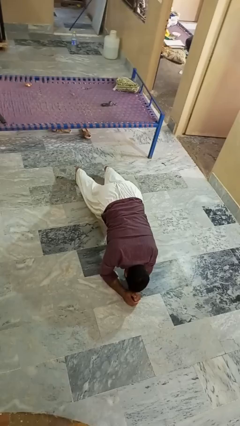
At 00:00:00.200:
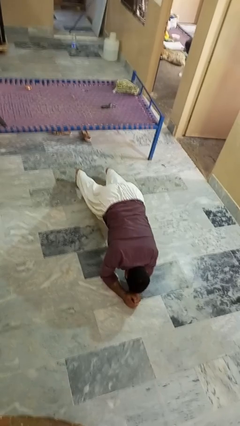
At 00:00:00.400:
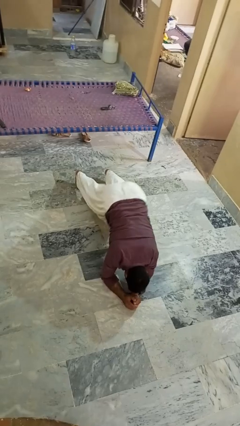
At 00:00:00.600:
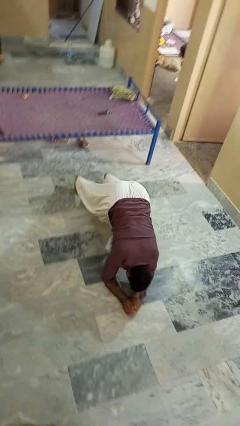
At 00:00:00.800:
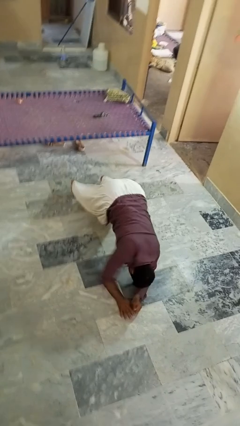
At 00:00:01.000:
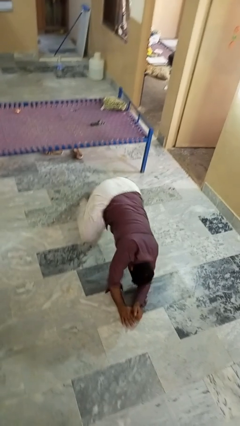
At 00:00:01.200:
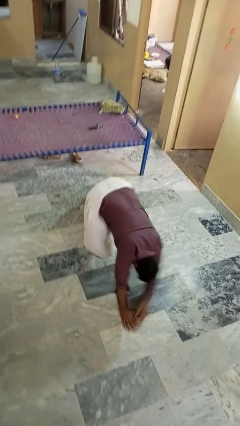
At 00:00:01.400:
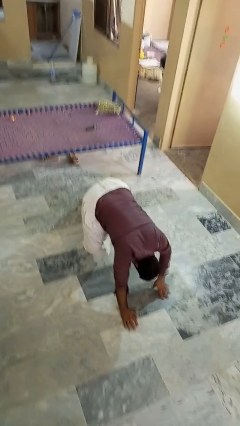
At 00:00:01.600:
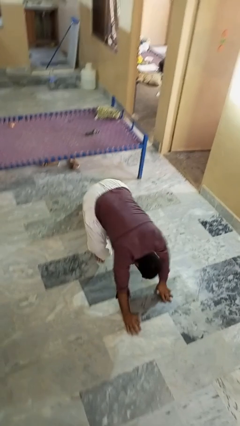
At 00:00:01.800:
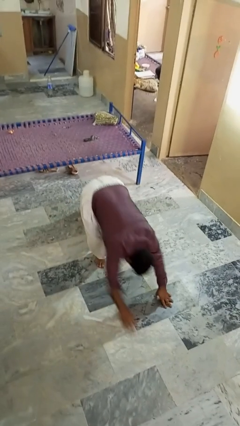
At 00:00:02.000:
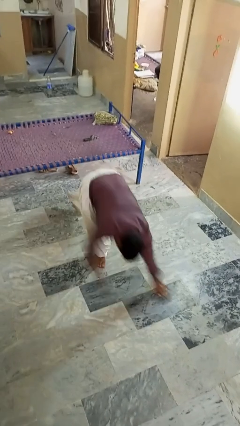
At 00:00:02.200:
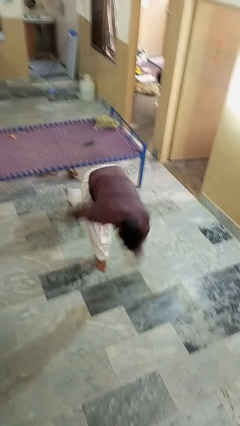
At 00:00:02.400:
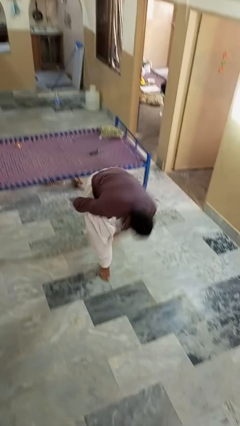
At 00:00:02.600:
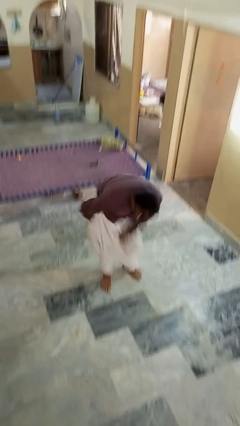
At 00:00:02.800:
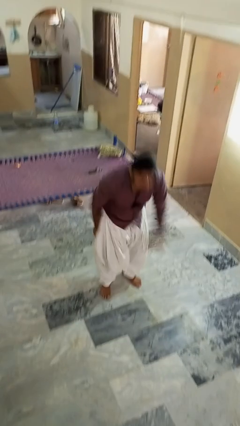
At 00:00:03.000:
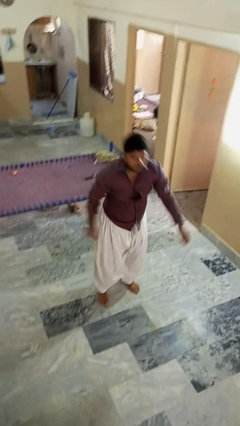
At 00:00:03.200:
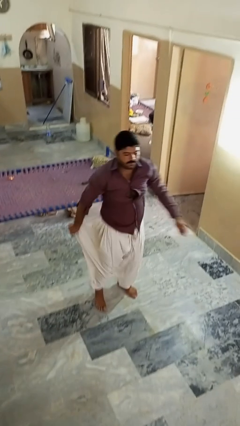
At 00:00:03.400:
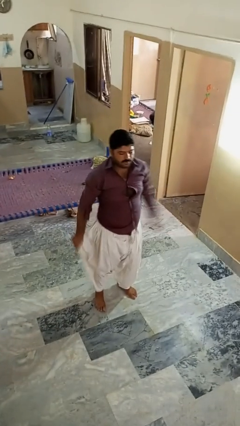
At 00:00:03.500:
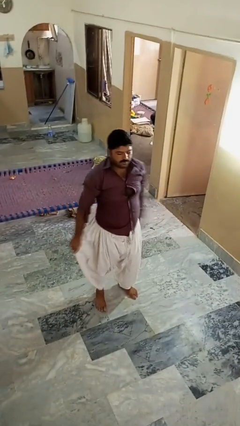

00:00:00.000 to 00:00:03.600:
person stands up from floor

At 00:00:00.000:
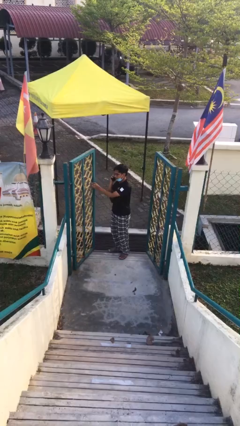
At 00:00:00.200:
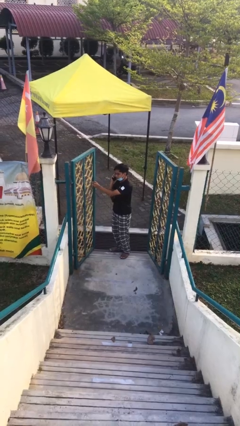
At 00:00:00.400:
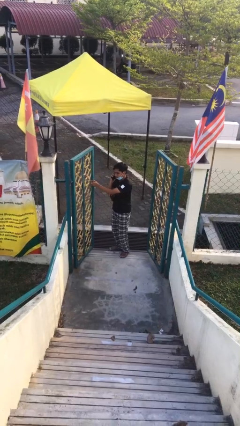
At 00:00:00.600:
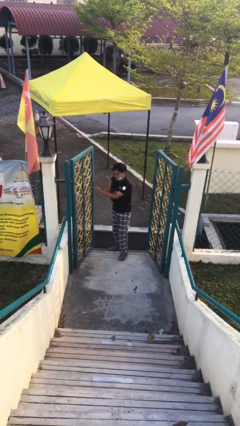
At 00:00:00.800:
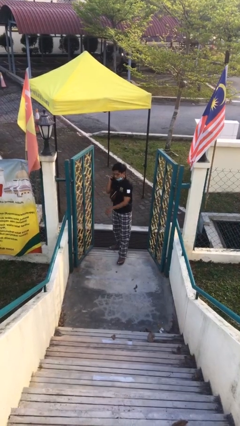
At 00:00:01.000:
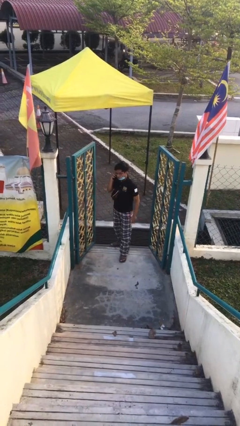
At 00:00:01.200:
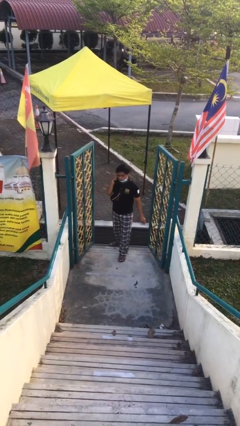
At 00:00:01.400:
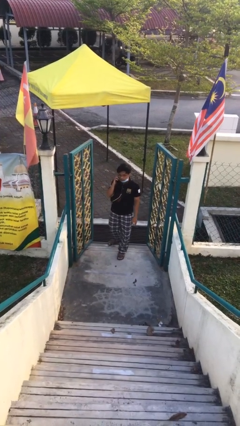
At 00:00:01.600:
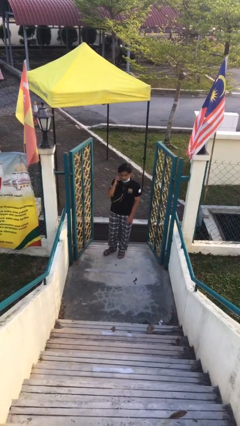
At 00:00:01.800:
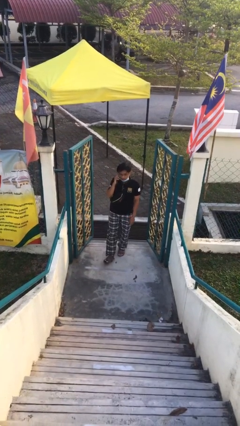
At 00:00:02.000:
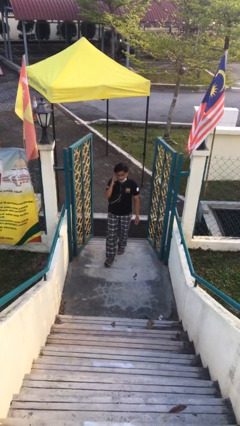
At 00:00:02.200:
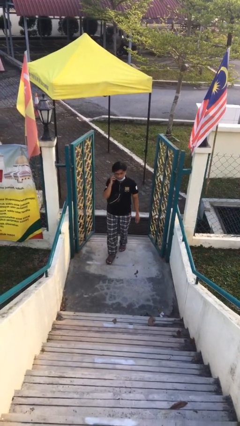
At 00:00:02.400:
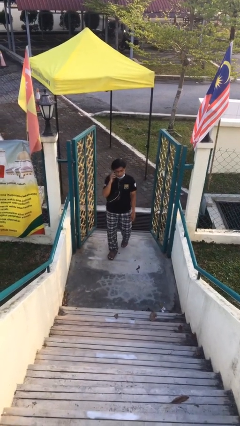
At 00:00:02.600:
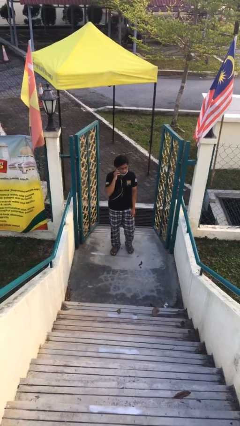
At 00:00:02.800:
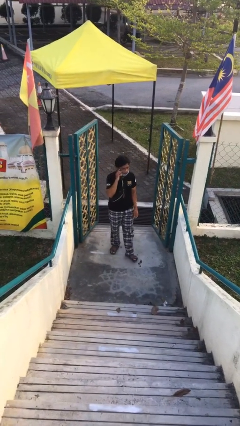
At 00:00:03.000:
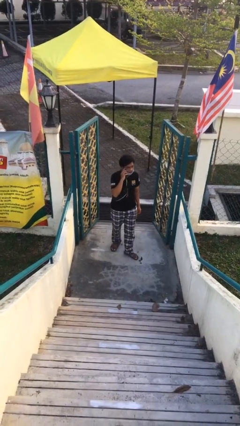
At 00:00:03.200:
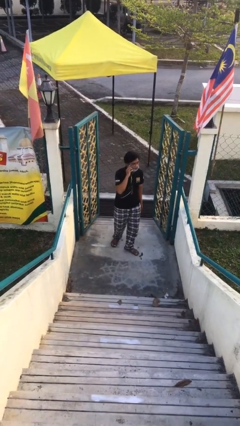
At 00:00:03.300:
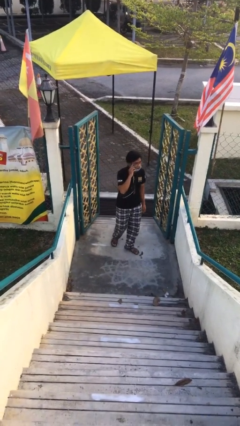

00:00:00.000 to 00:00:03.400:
person enters scene through structure

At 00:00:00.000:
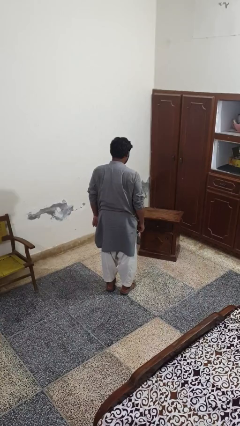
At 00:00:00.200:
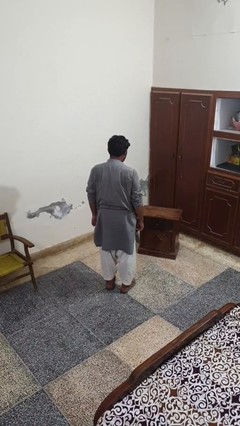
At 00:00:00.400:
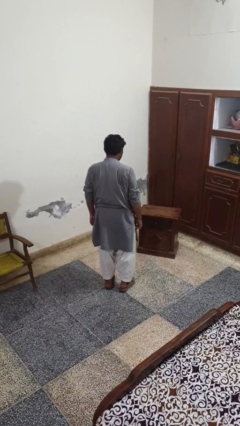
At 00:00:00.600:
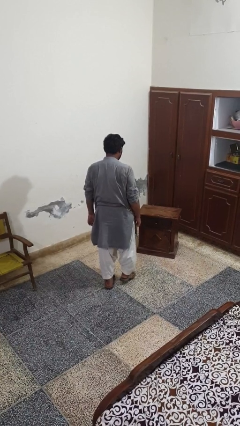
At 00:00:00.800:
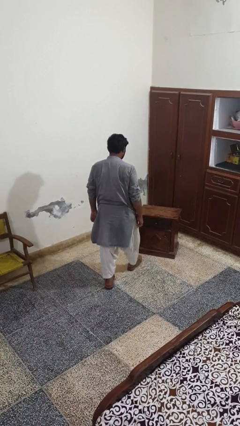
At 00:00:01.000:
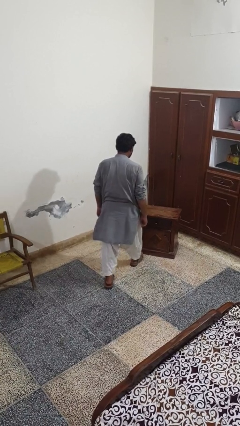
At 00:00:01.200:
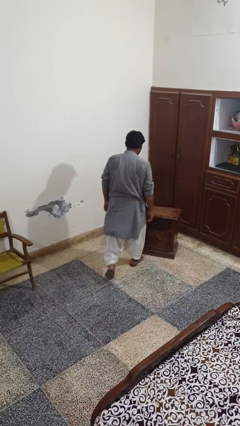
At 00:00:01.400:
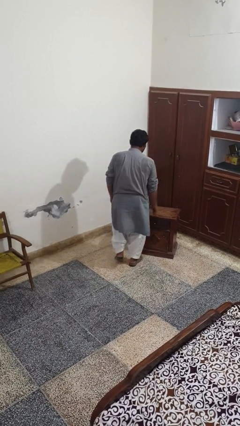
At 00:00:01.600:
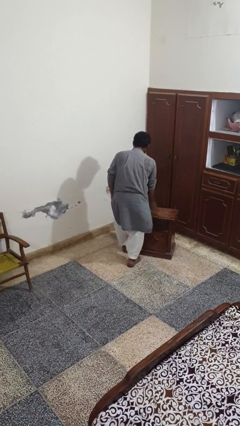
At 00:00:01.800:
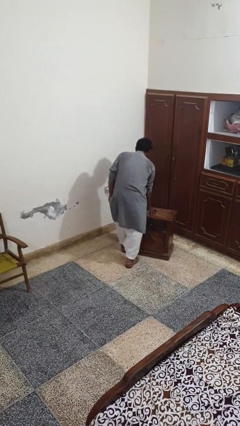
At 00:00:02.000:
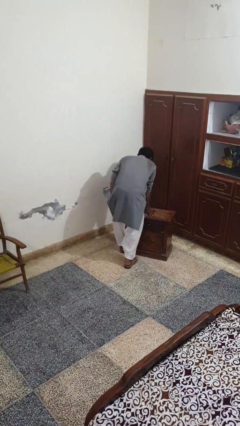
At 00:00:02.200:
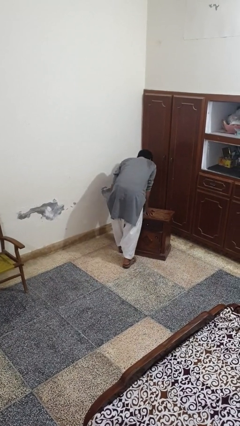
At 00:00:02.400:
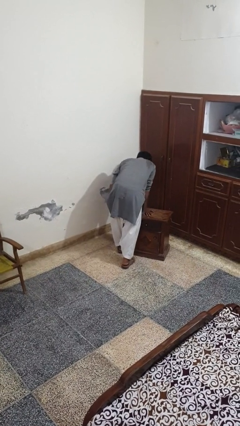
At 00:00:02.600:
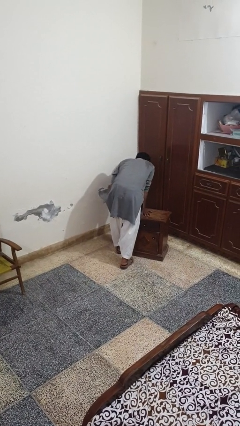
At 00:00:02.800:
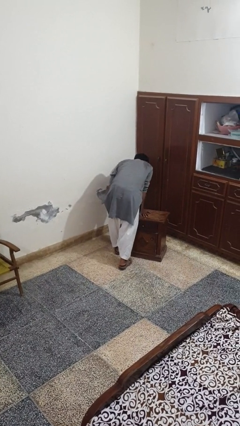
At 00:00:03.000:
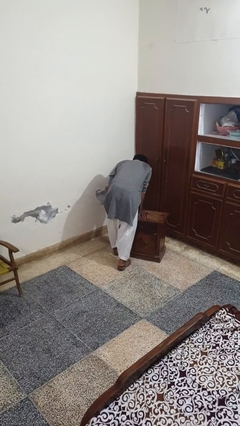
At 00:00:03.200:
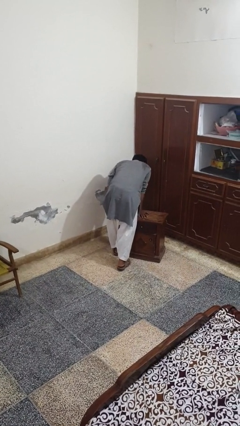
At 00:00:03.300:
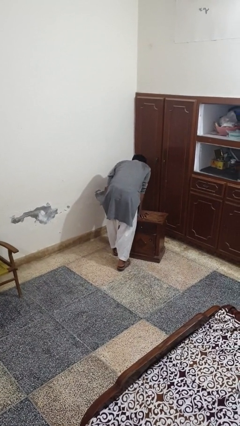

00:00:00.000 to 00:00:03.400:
person bumps into table

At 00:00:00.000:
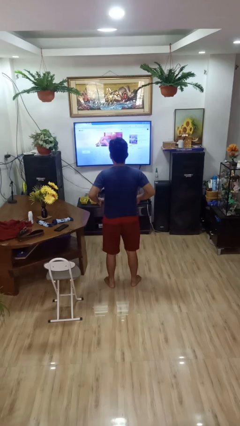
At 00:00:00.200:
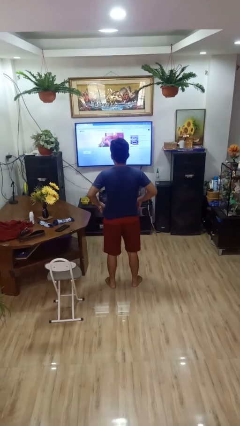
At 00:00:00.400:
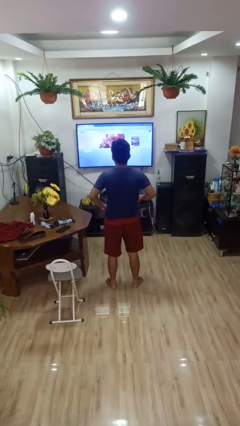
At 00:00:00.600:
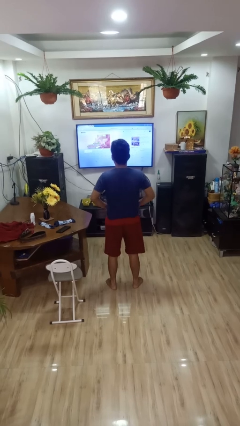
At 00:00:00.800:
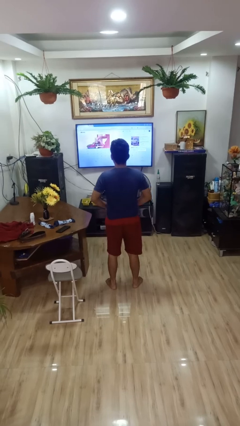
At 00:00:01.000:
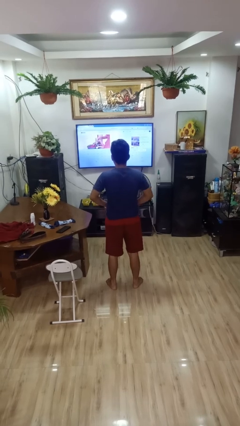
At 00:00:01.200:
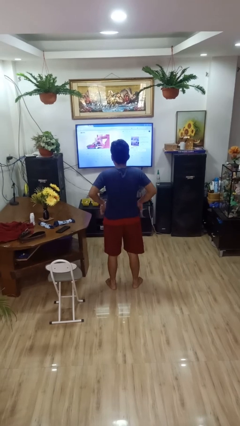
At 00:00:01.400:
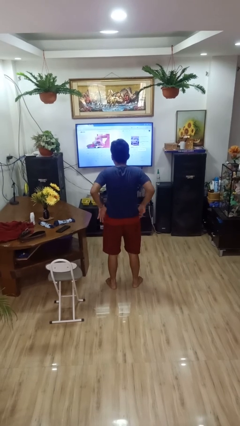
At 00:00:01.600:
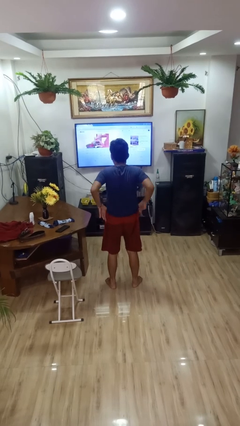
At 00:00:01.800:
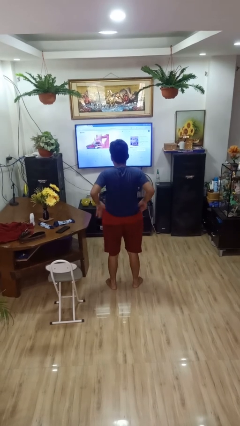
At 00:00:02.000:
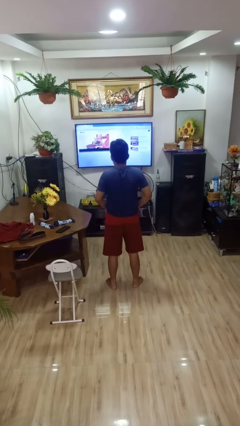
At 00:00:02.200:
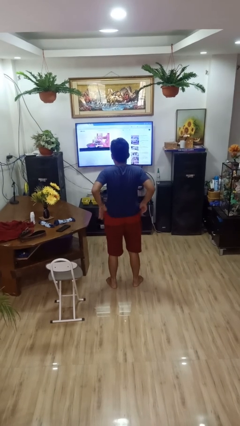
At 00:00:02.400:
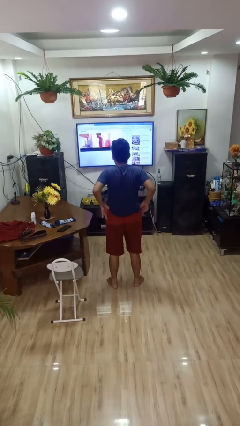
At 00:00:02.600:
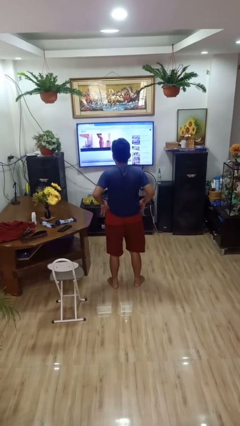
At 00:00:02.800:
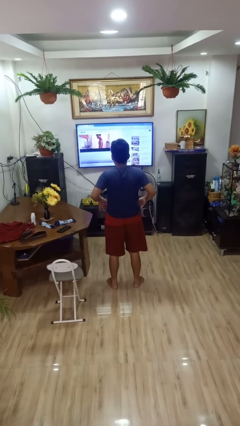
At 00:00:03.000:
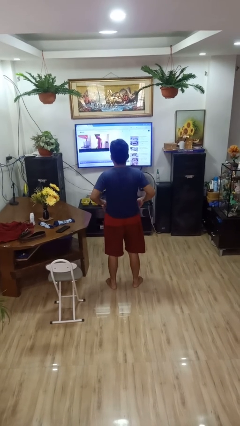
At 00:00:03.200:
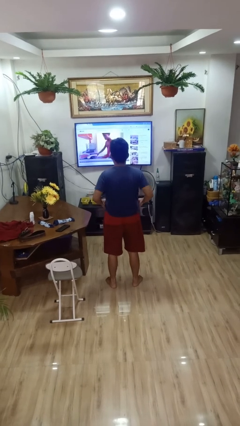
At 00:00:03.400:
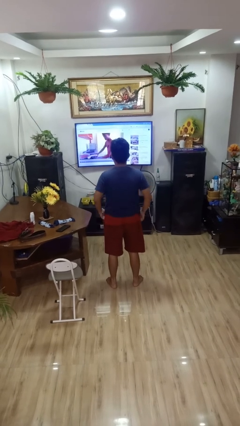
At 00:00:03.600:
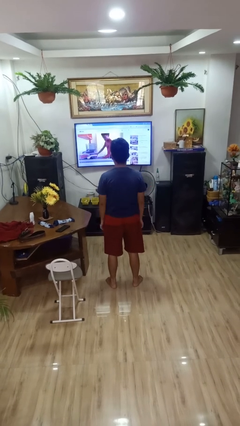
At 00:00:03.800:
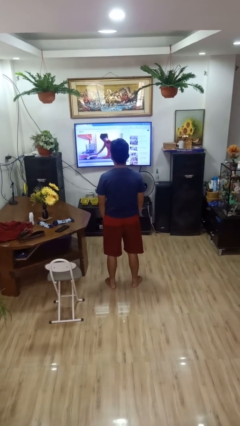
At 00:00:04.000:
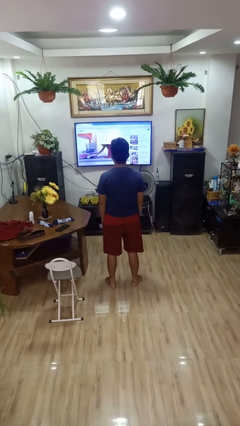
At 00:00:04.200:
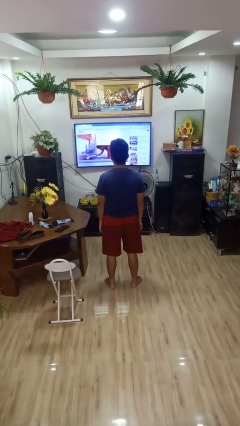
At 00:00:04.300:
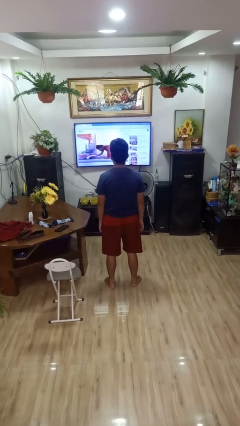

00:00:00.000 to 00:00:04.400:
person hikes up pants

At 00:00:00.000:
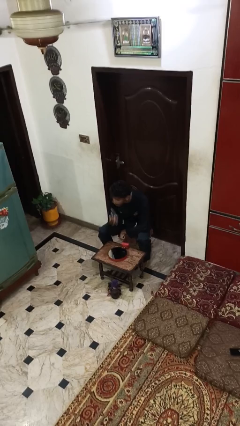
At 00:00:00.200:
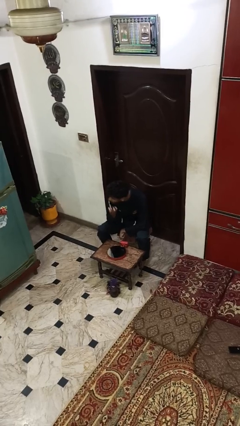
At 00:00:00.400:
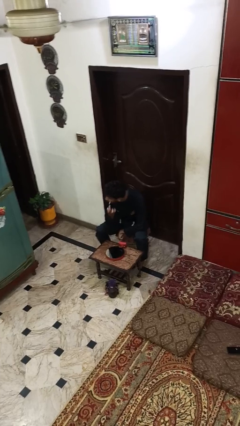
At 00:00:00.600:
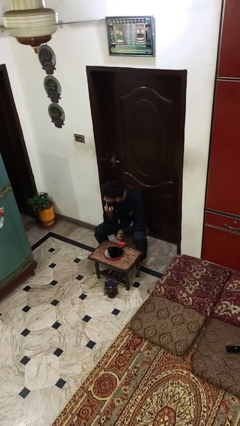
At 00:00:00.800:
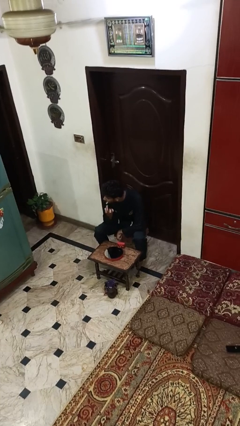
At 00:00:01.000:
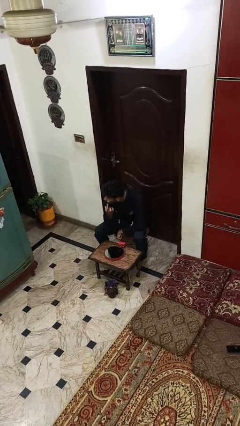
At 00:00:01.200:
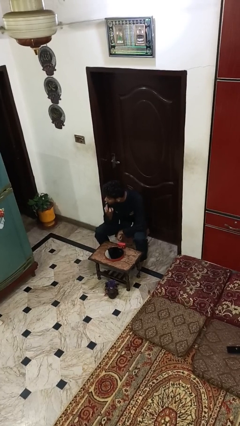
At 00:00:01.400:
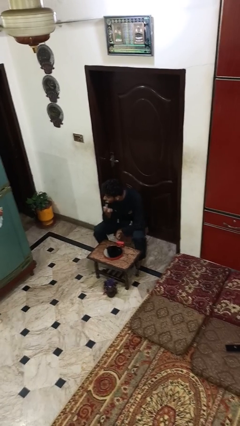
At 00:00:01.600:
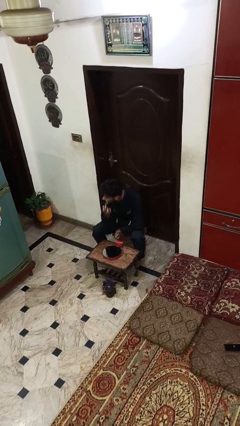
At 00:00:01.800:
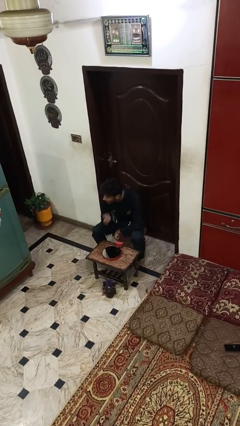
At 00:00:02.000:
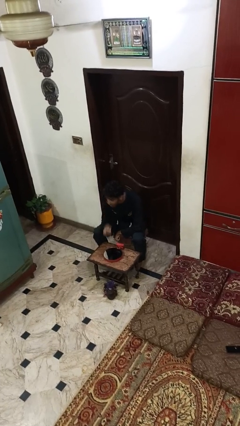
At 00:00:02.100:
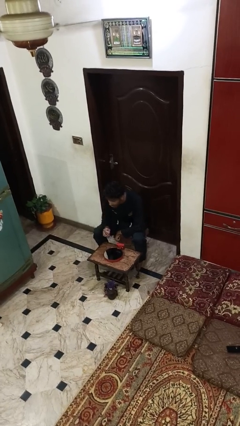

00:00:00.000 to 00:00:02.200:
person applies eye makeup
